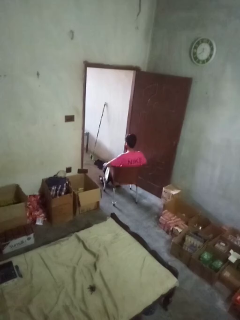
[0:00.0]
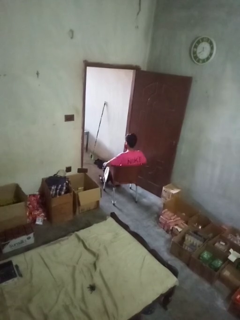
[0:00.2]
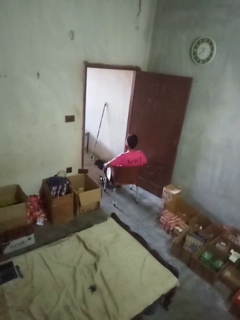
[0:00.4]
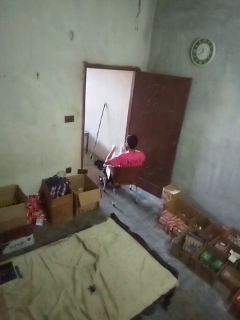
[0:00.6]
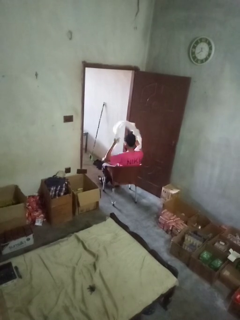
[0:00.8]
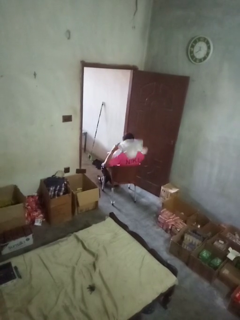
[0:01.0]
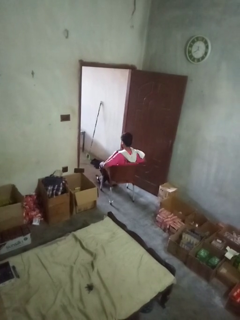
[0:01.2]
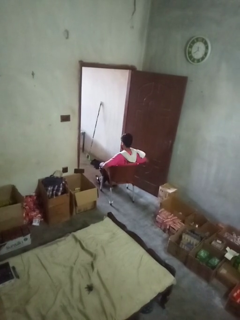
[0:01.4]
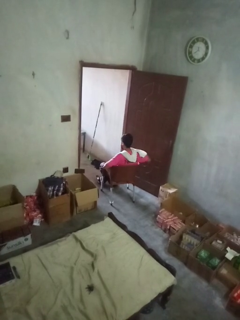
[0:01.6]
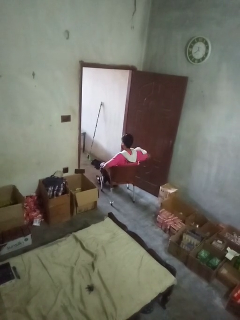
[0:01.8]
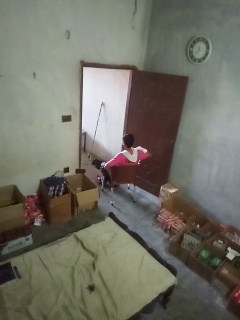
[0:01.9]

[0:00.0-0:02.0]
person puts on scarf

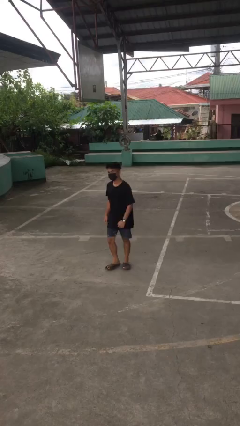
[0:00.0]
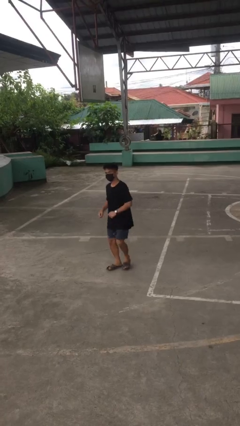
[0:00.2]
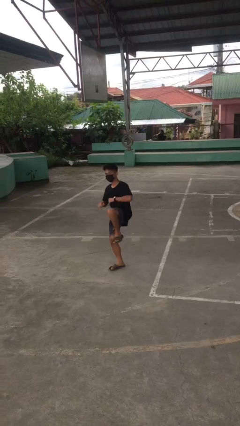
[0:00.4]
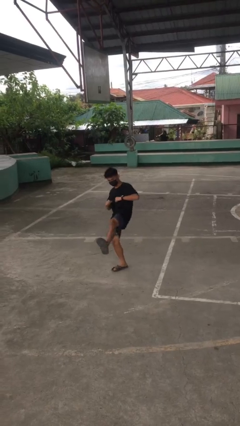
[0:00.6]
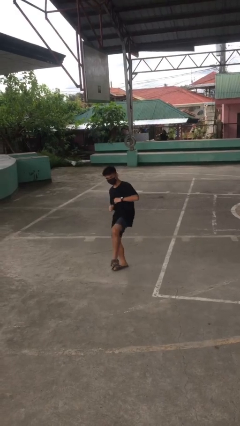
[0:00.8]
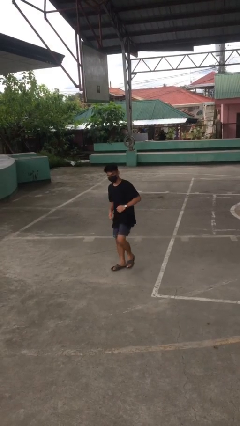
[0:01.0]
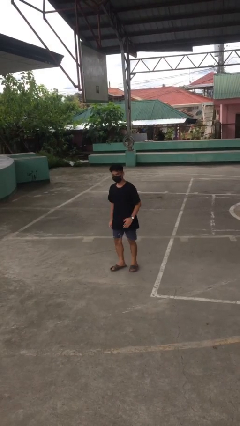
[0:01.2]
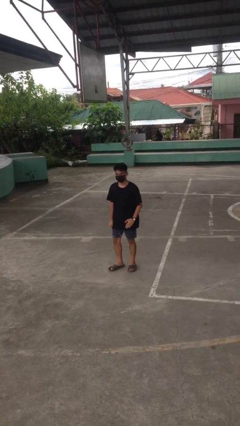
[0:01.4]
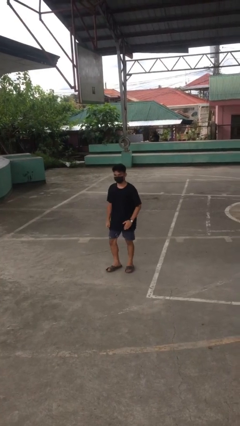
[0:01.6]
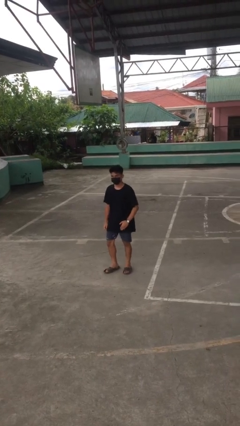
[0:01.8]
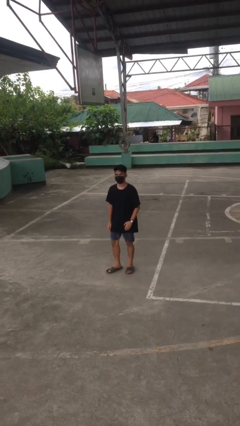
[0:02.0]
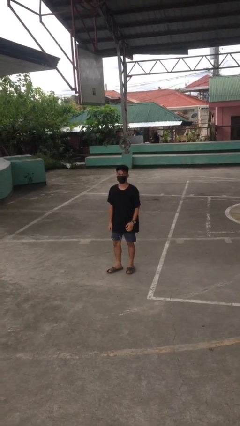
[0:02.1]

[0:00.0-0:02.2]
person karate kicks

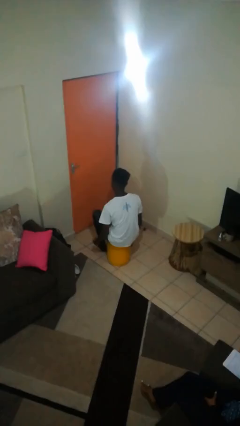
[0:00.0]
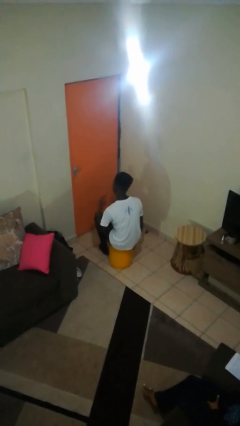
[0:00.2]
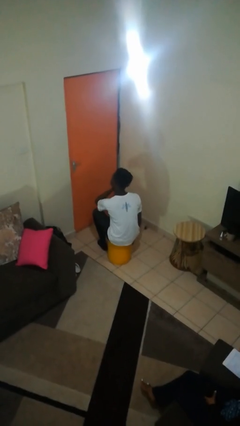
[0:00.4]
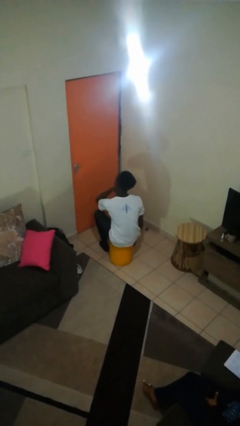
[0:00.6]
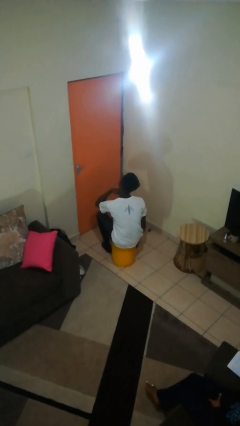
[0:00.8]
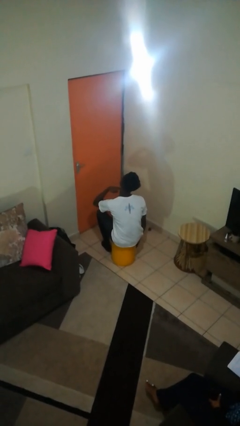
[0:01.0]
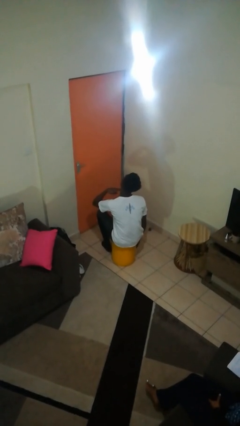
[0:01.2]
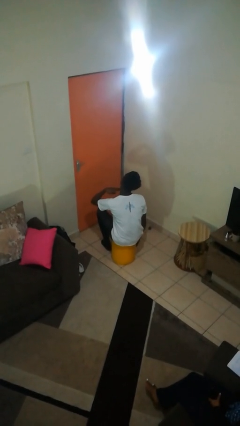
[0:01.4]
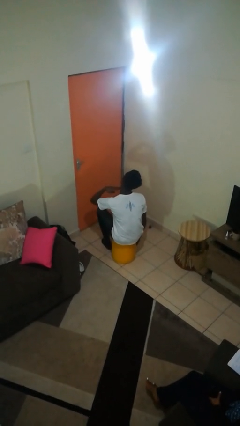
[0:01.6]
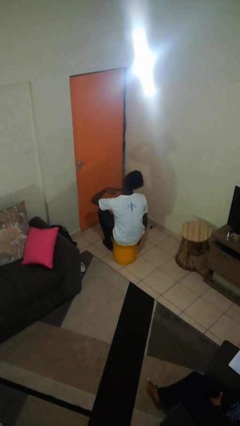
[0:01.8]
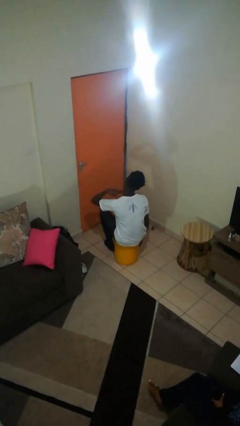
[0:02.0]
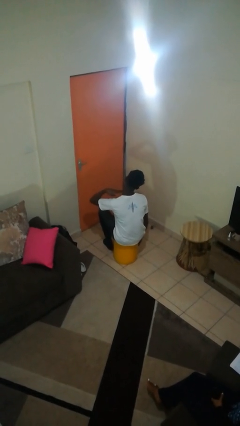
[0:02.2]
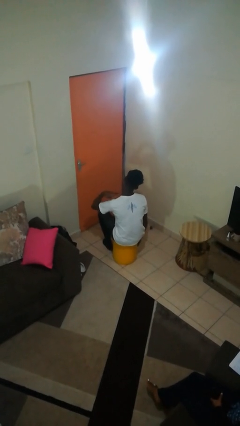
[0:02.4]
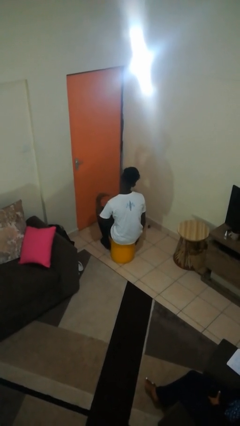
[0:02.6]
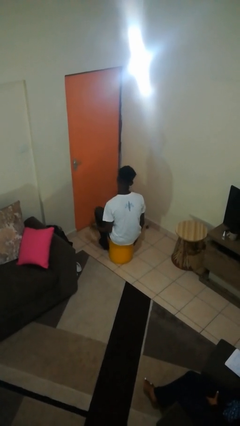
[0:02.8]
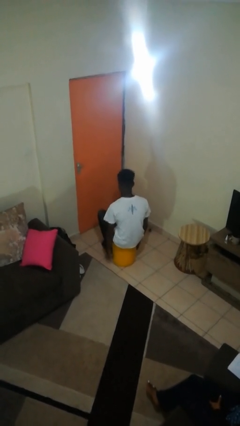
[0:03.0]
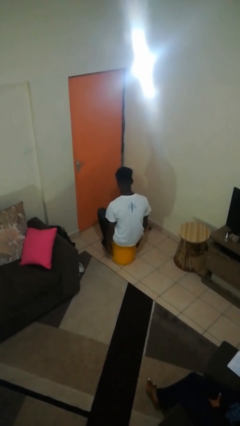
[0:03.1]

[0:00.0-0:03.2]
person gestures cut

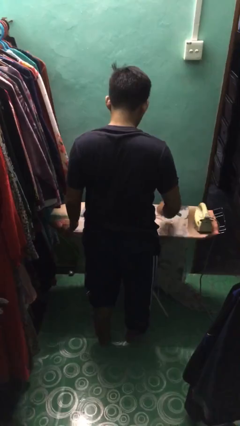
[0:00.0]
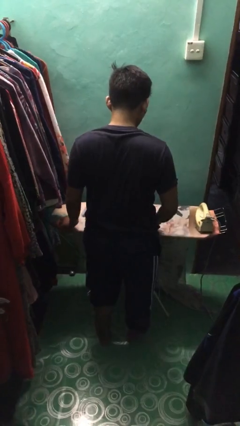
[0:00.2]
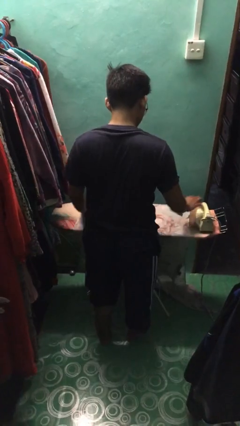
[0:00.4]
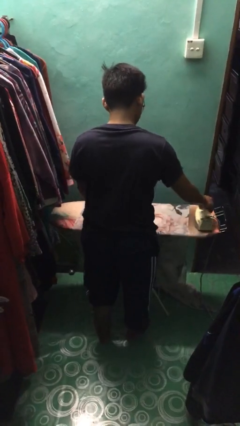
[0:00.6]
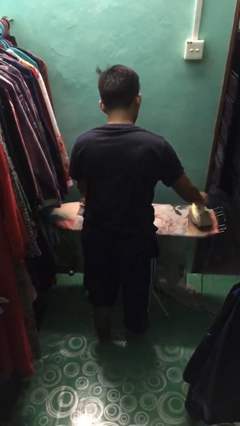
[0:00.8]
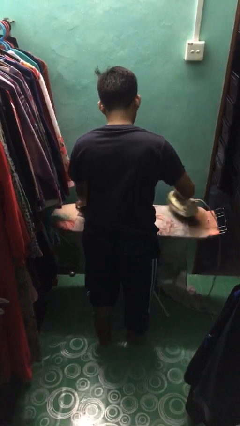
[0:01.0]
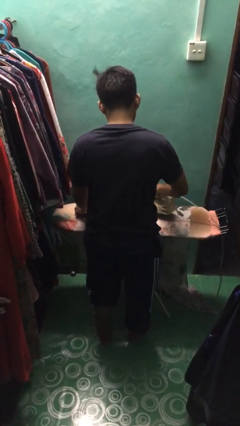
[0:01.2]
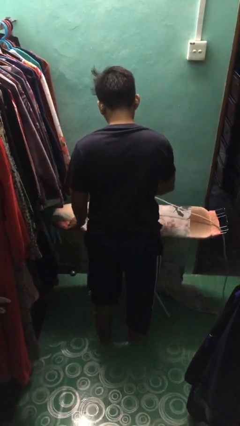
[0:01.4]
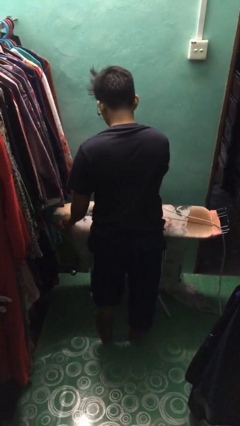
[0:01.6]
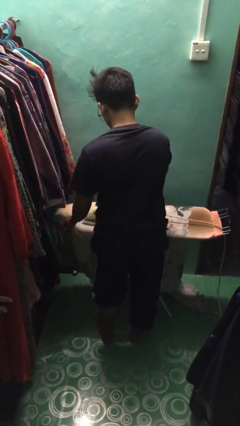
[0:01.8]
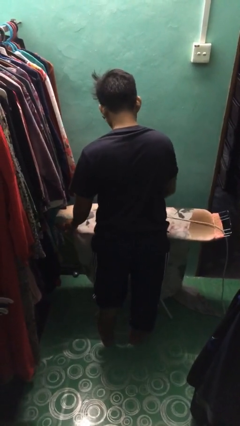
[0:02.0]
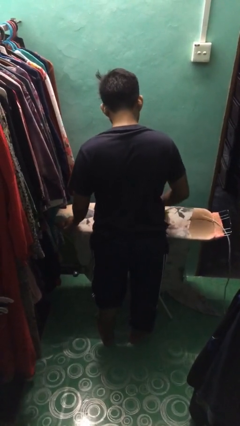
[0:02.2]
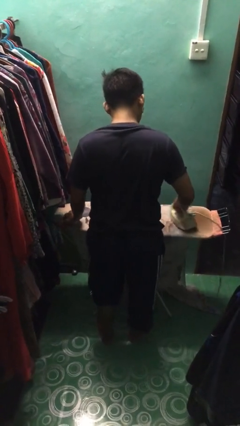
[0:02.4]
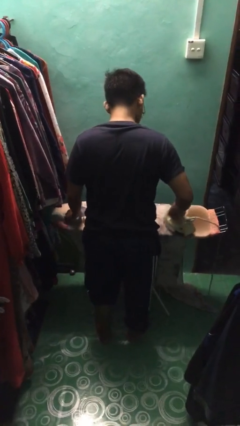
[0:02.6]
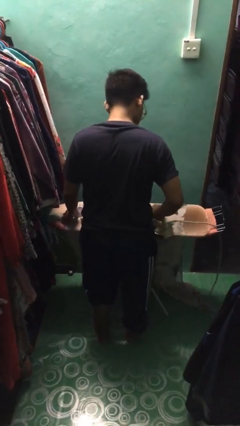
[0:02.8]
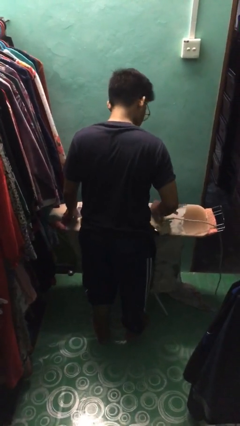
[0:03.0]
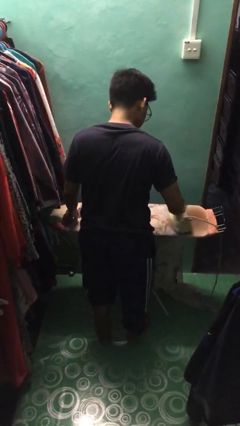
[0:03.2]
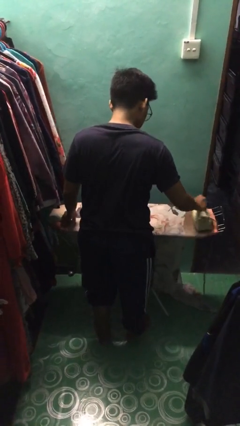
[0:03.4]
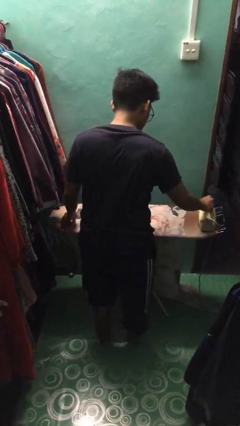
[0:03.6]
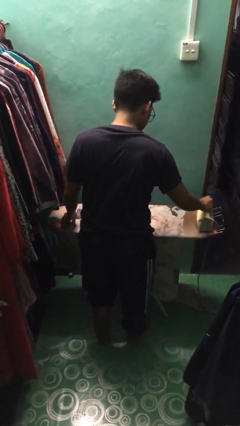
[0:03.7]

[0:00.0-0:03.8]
person irons clothes

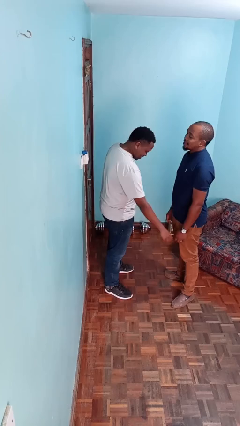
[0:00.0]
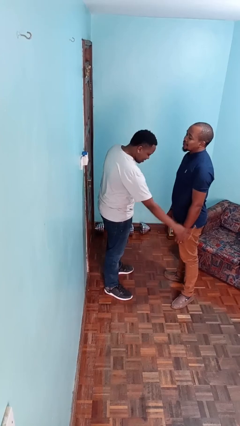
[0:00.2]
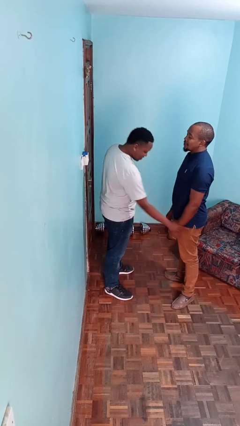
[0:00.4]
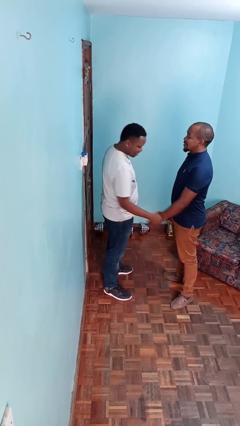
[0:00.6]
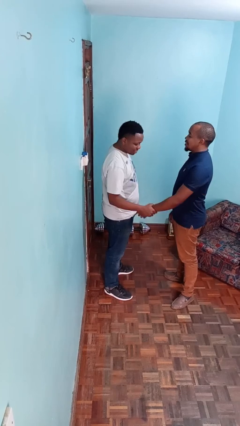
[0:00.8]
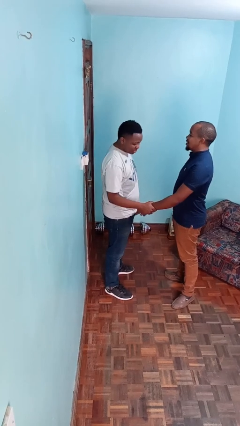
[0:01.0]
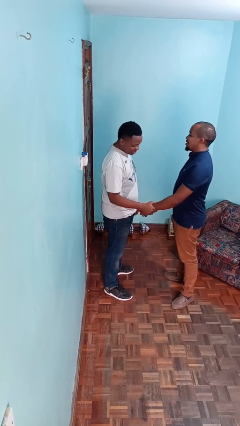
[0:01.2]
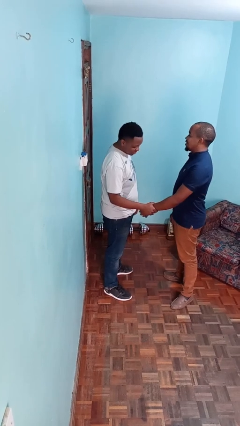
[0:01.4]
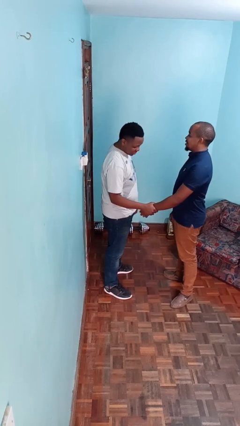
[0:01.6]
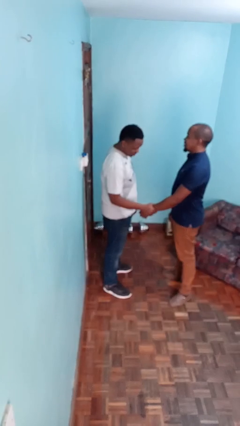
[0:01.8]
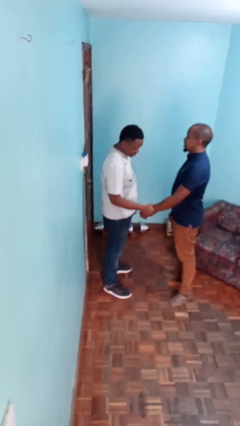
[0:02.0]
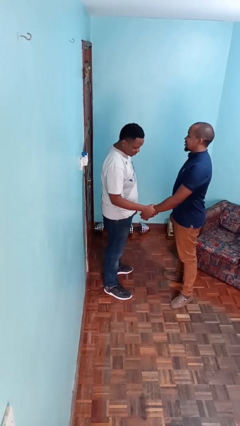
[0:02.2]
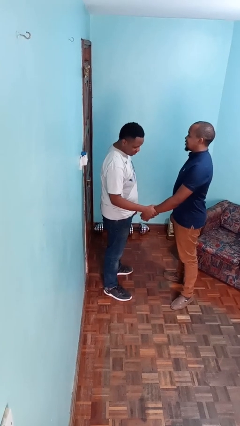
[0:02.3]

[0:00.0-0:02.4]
person grabs person by forearm

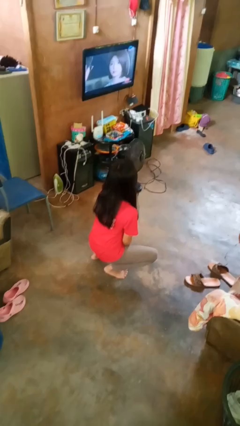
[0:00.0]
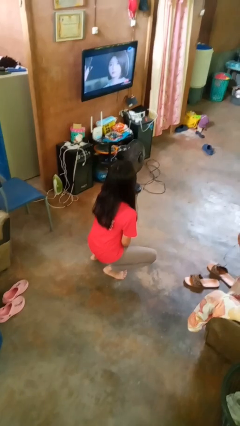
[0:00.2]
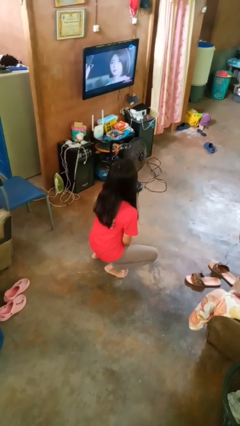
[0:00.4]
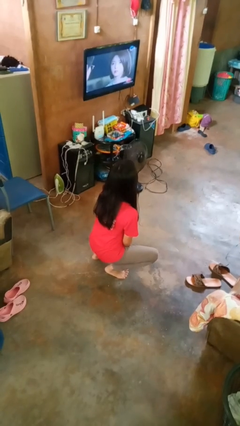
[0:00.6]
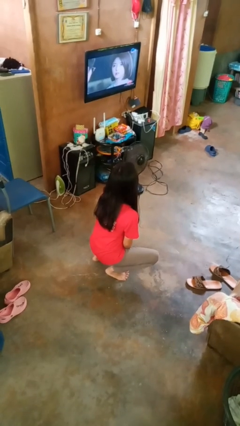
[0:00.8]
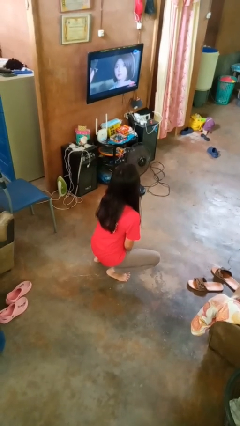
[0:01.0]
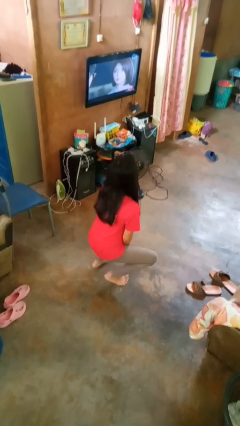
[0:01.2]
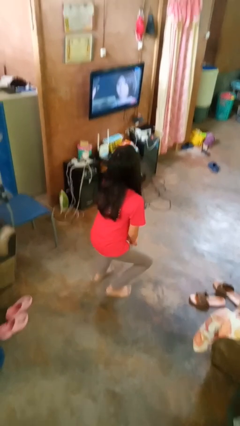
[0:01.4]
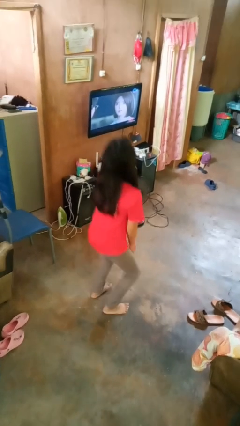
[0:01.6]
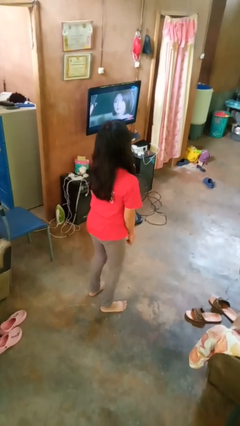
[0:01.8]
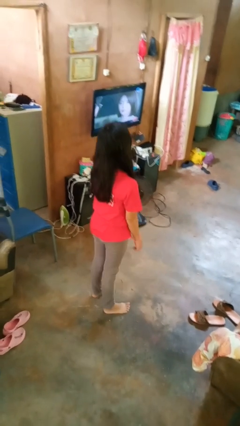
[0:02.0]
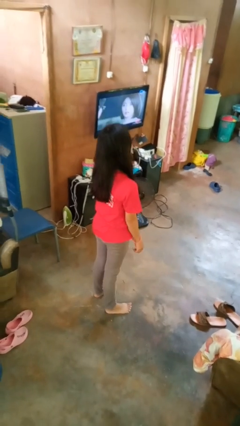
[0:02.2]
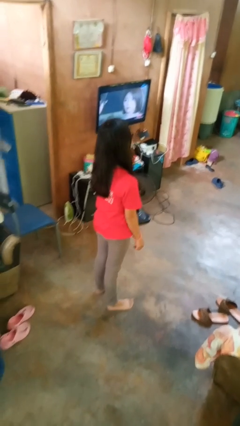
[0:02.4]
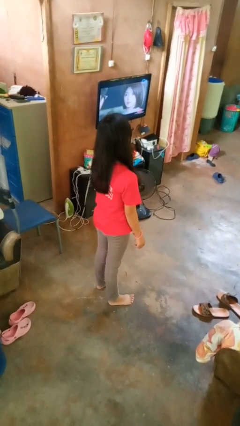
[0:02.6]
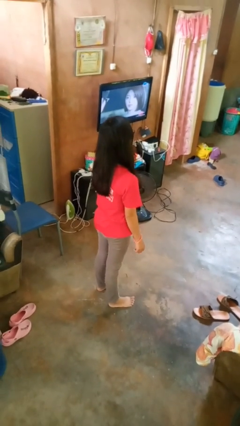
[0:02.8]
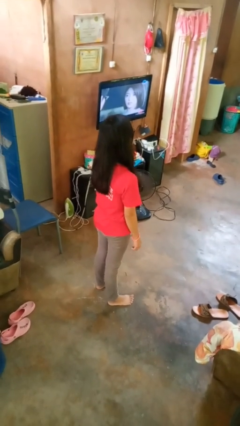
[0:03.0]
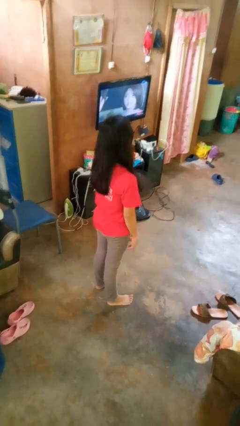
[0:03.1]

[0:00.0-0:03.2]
person stands up

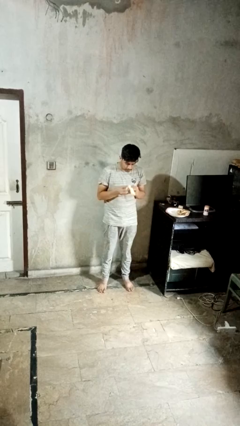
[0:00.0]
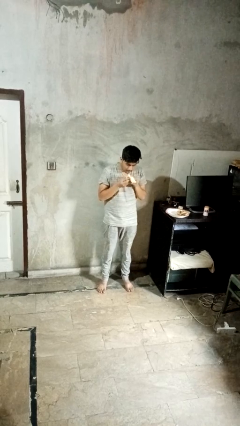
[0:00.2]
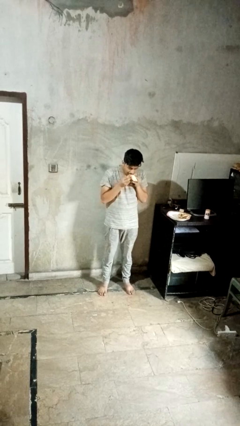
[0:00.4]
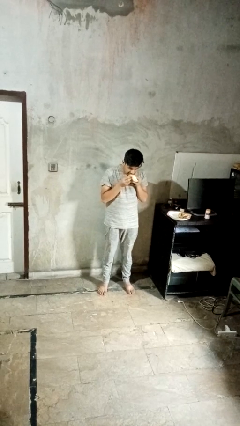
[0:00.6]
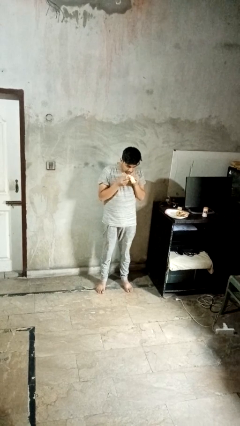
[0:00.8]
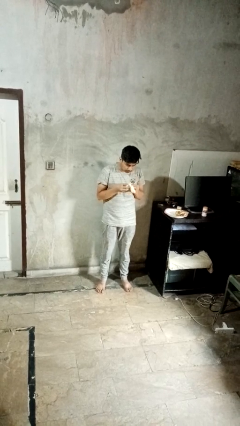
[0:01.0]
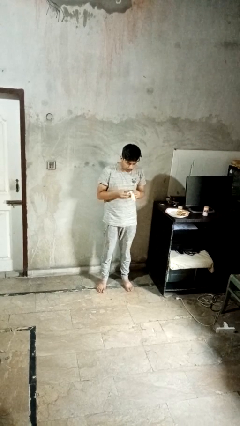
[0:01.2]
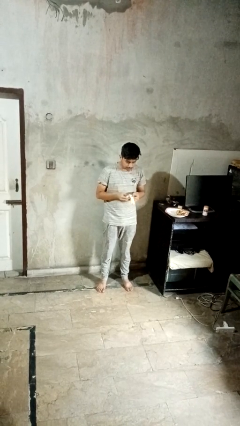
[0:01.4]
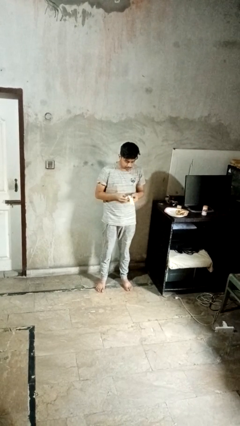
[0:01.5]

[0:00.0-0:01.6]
person eats banana
